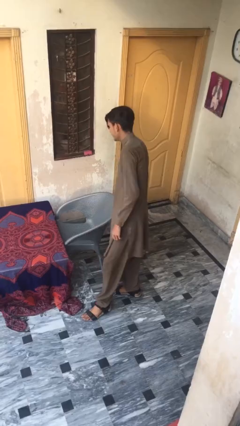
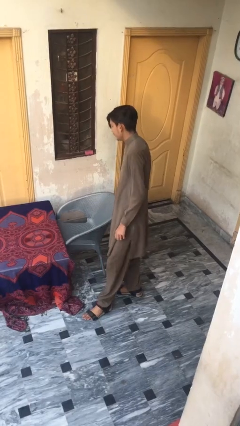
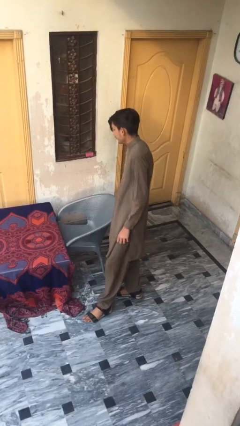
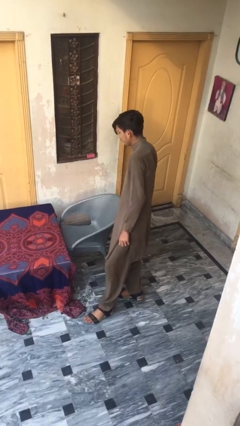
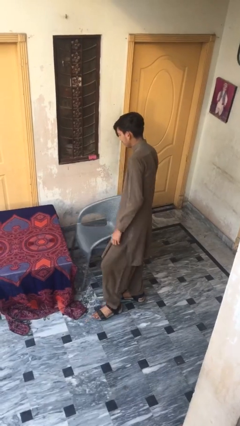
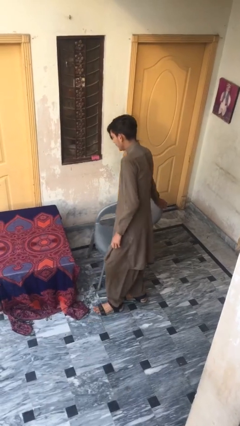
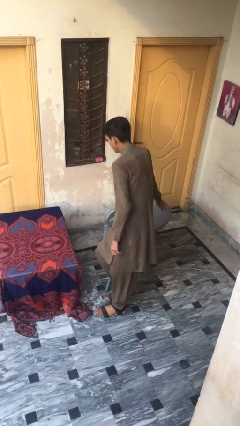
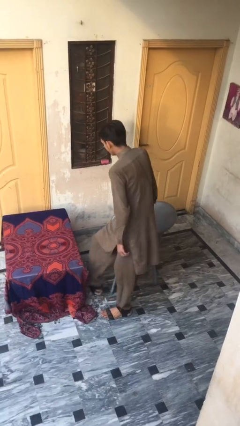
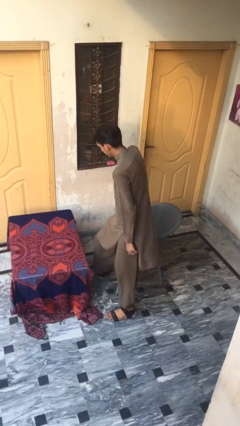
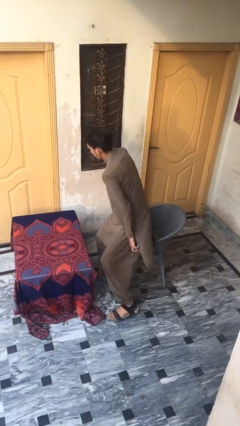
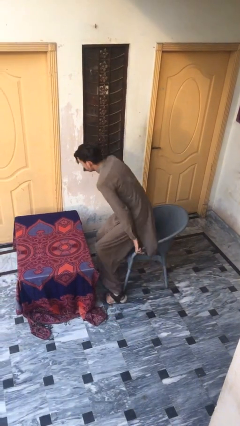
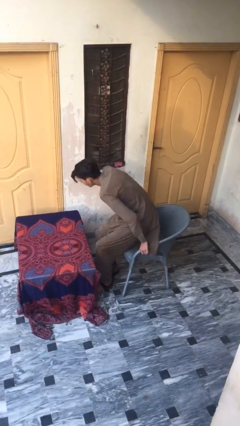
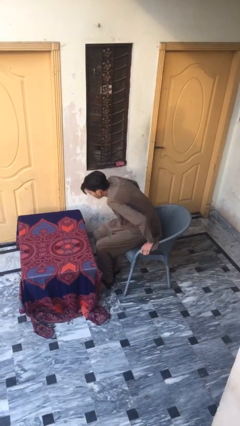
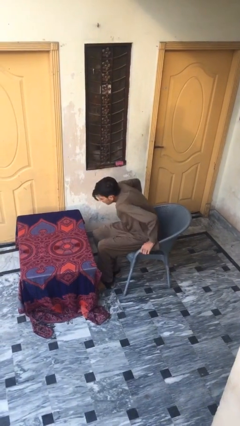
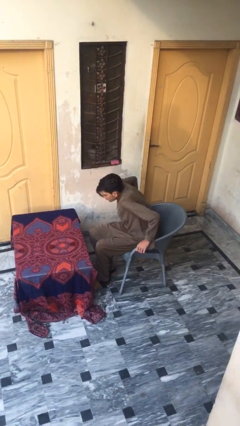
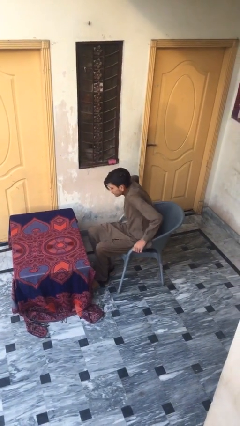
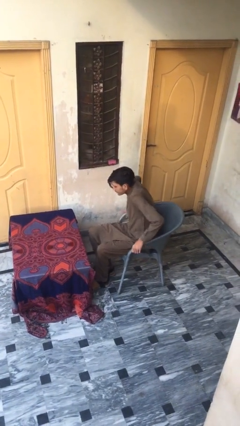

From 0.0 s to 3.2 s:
person sits down

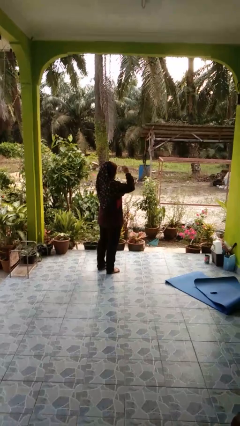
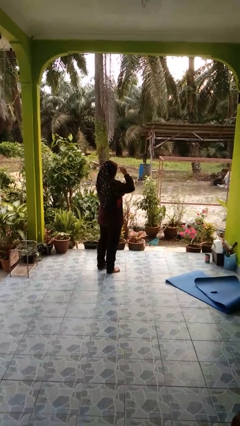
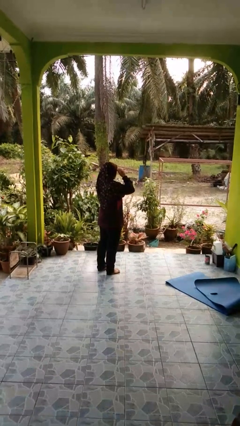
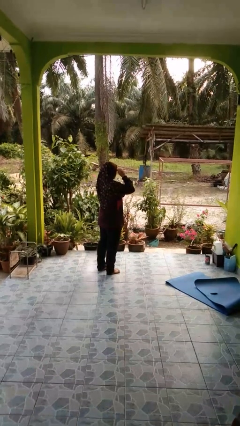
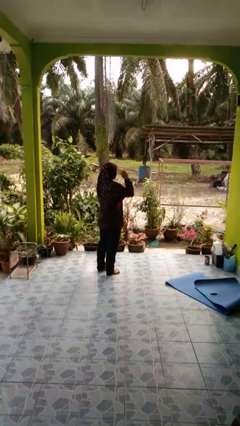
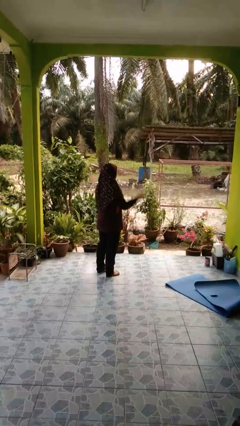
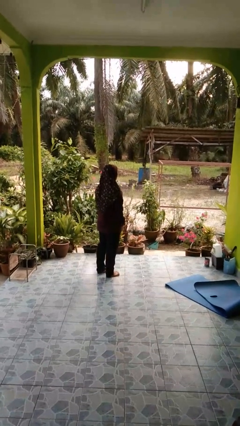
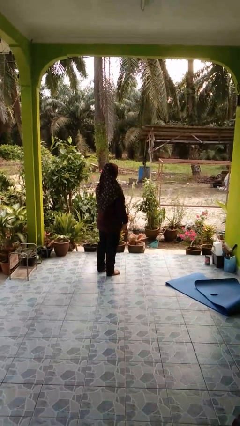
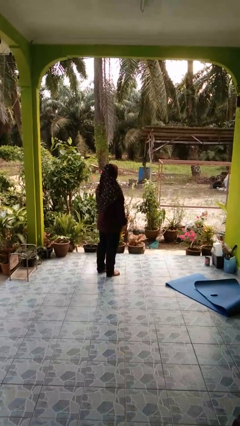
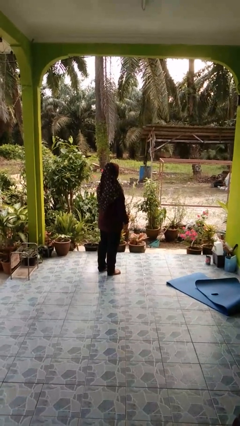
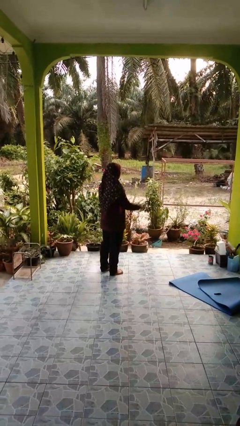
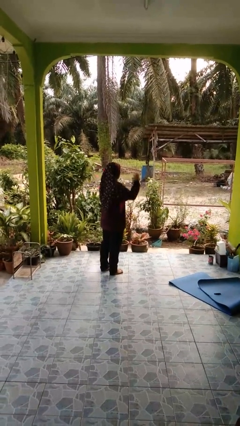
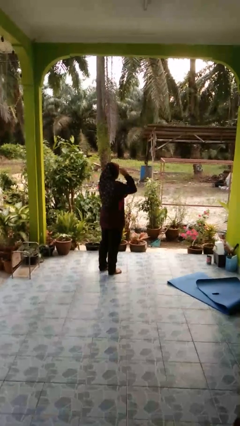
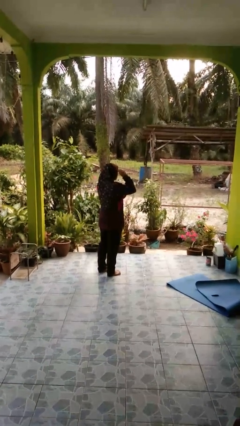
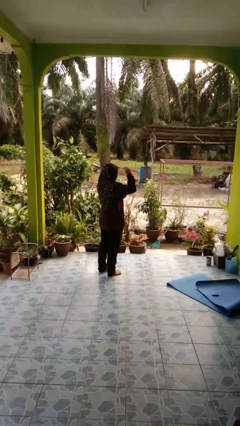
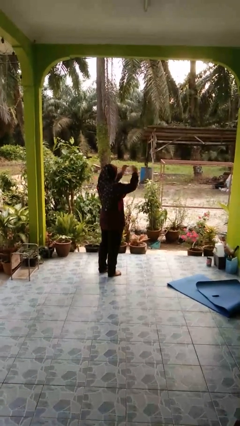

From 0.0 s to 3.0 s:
person puts on glasses

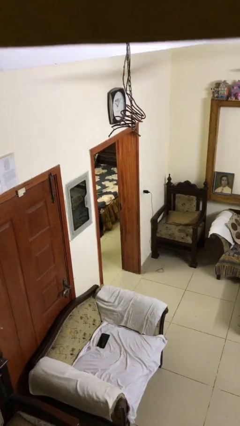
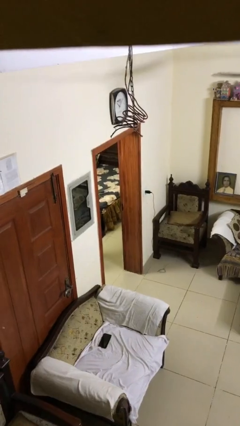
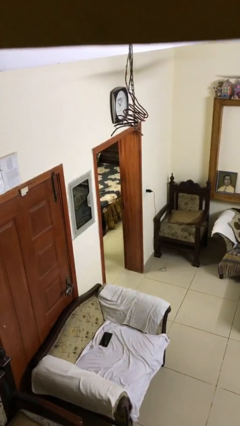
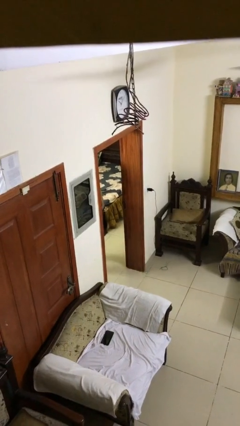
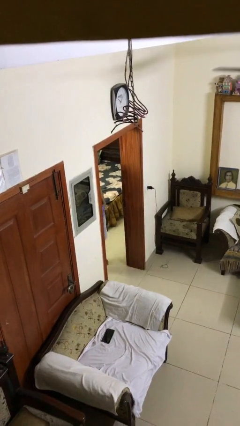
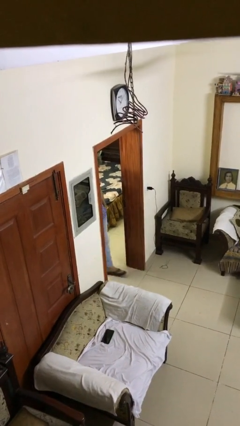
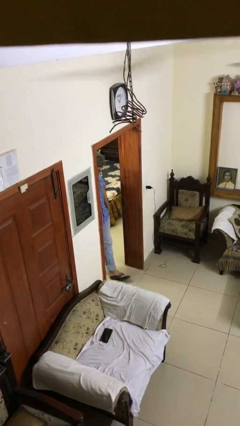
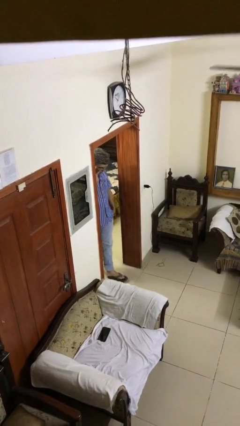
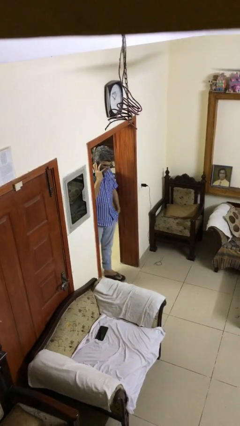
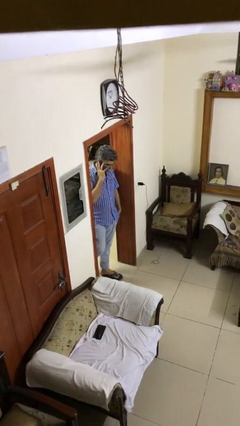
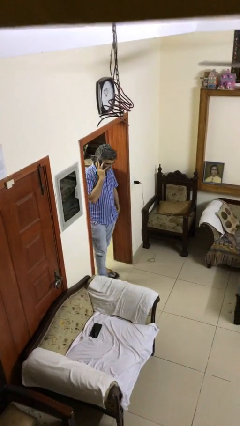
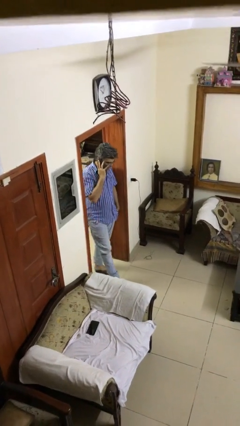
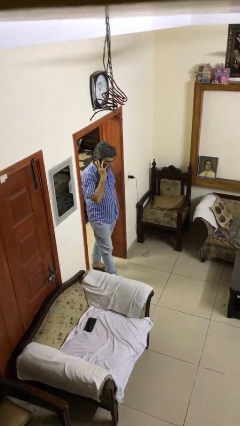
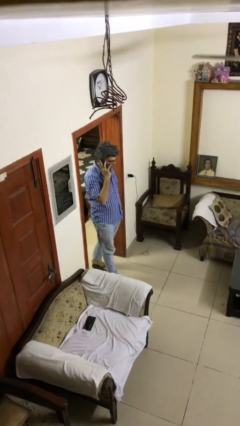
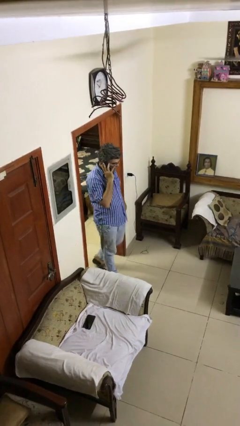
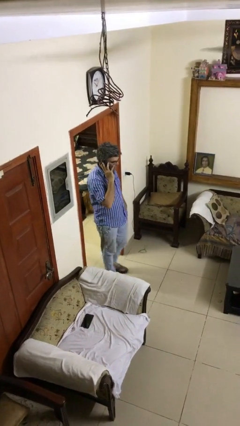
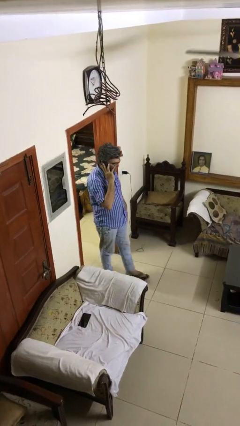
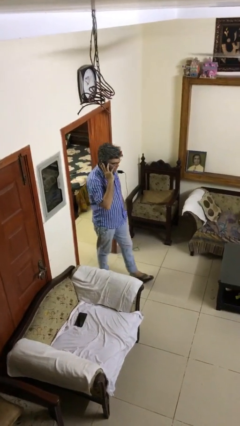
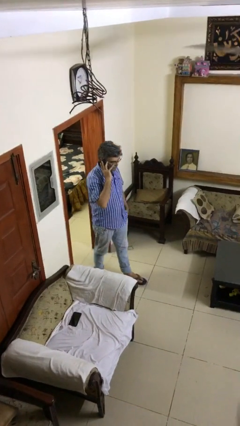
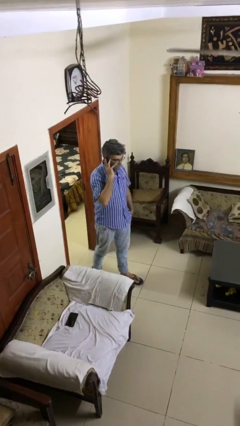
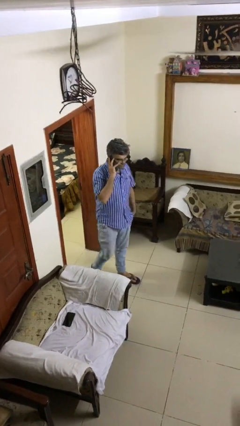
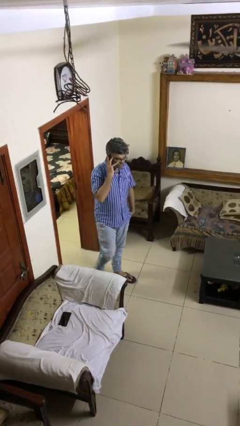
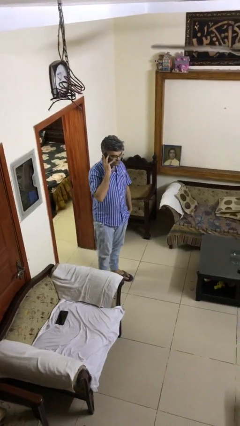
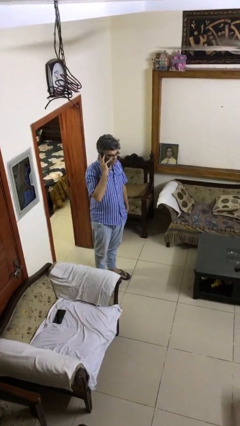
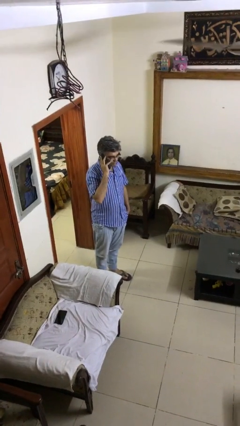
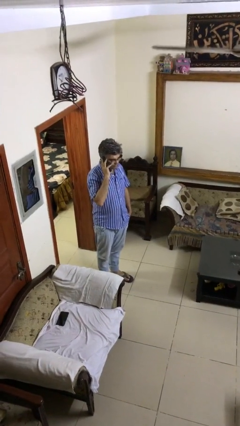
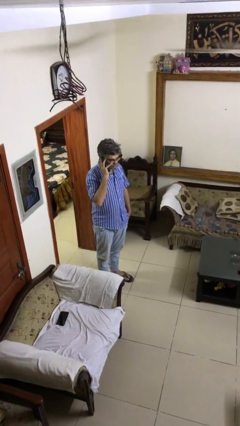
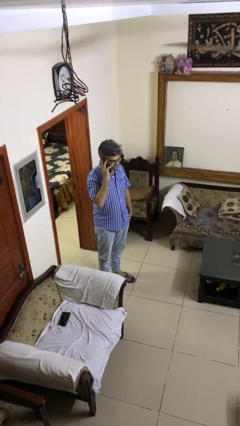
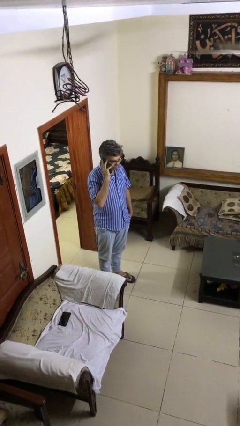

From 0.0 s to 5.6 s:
person enters scene through structure

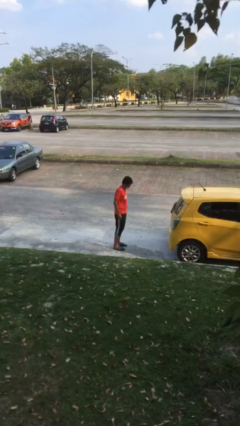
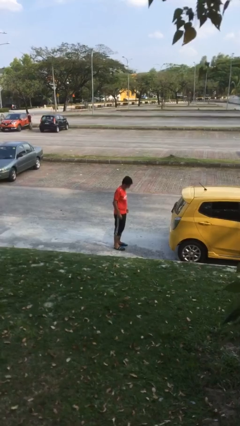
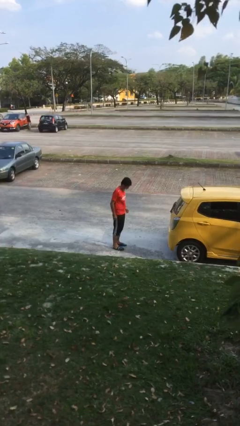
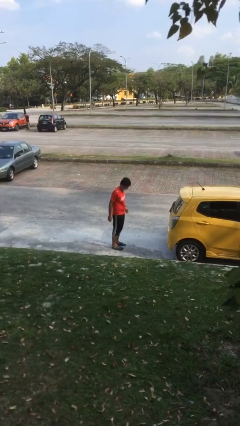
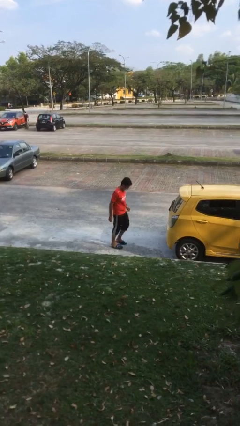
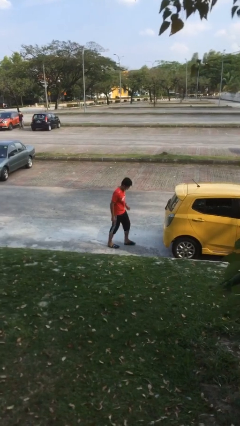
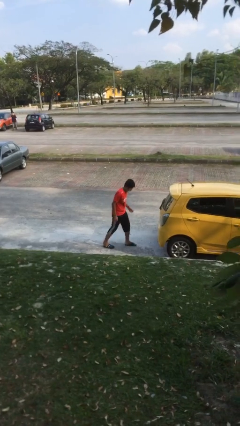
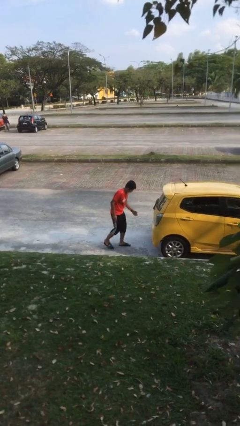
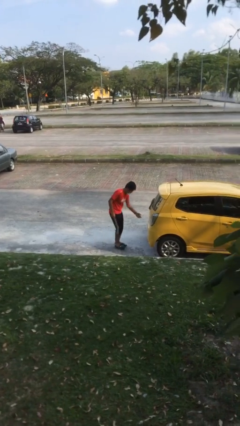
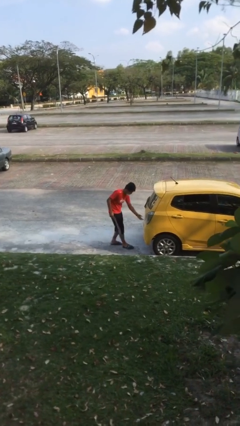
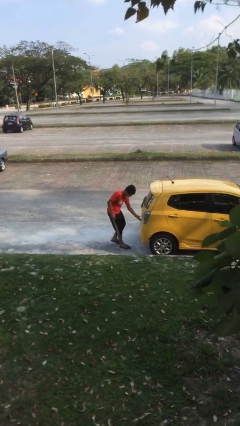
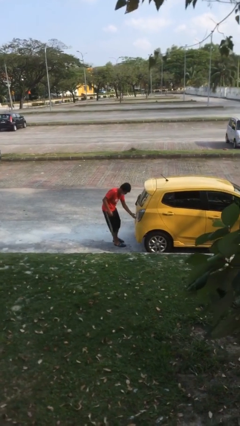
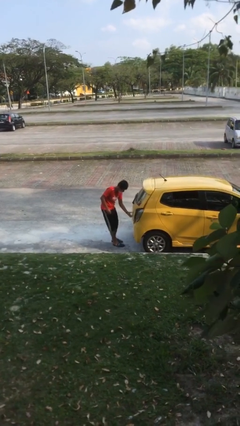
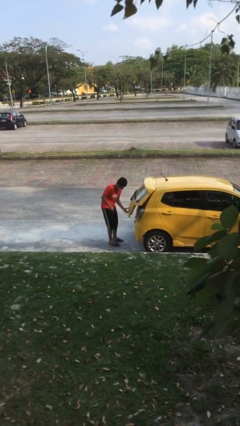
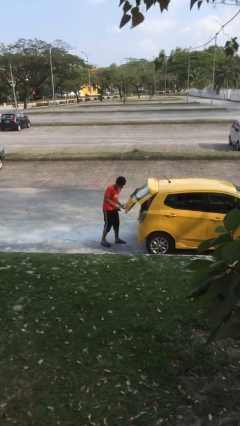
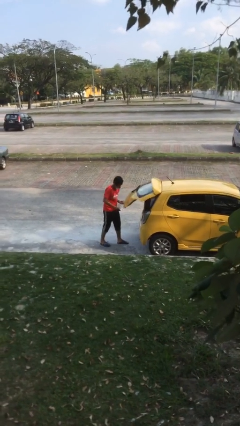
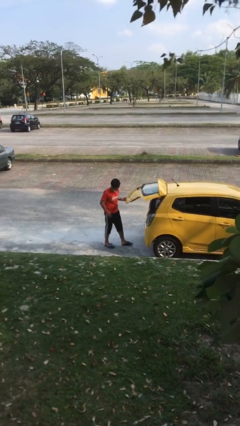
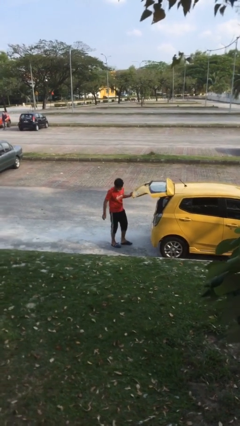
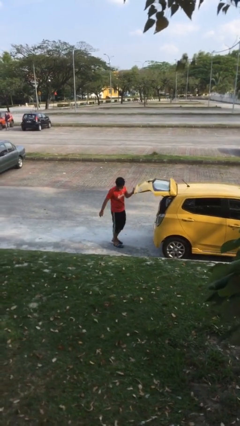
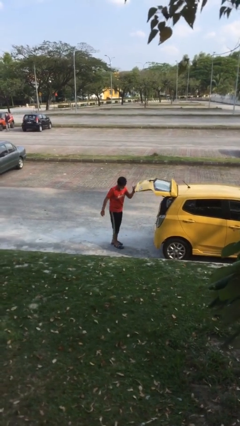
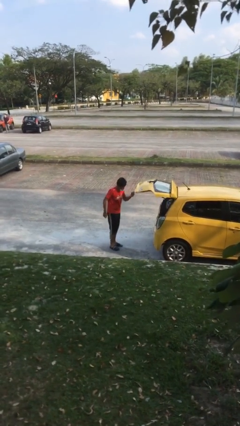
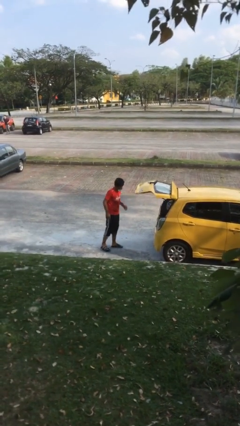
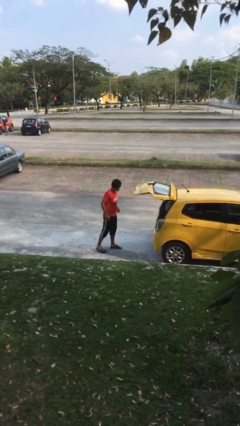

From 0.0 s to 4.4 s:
person opens car trunk

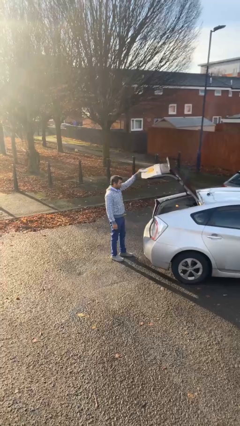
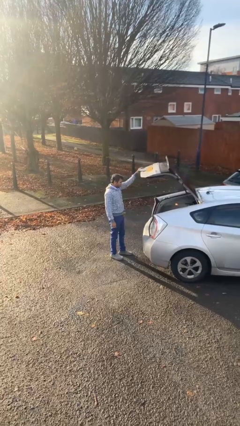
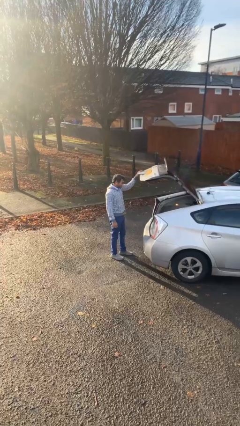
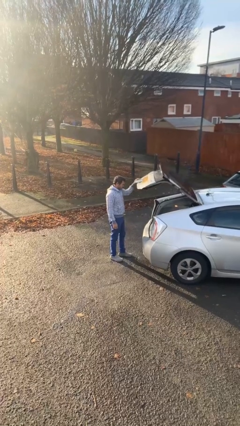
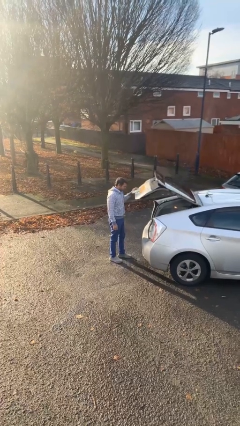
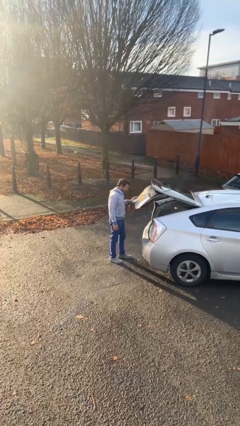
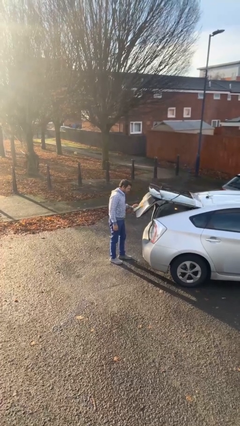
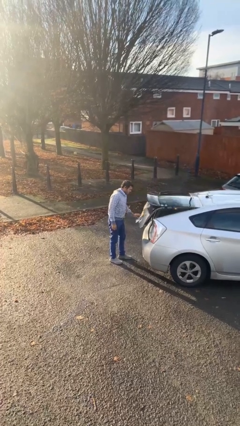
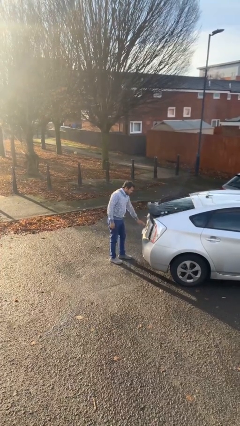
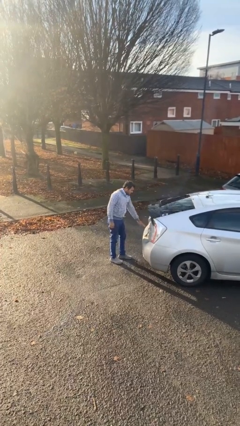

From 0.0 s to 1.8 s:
person closes car trunk
